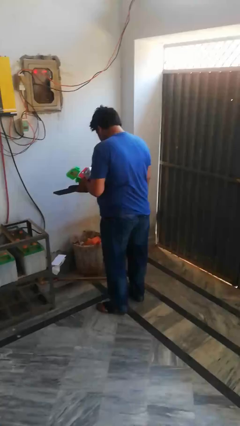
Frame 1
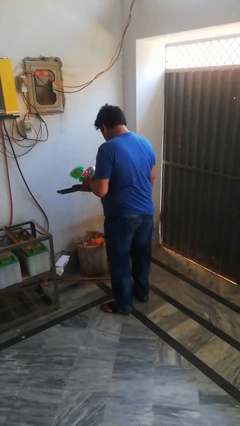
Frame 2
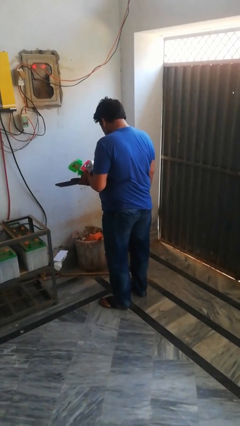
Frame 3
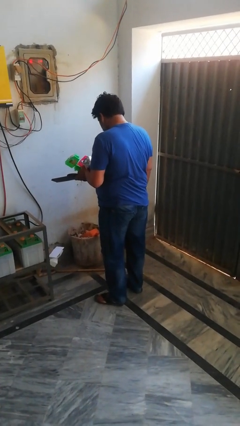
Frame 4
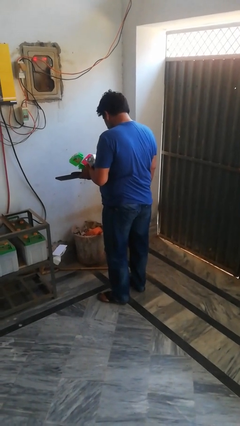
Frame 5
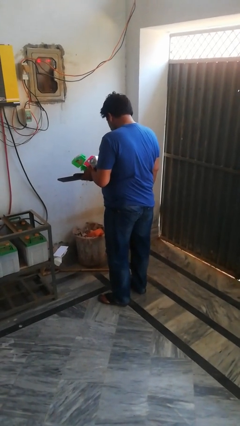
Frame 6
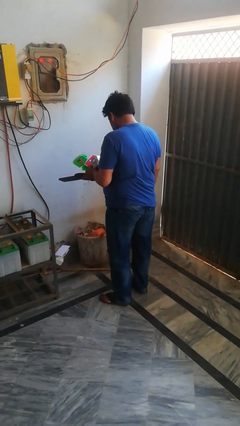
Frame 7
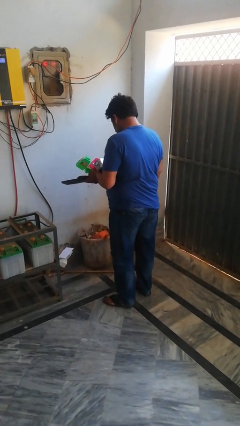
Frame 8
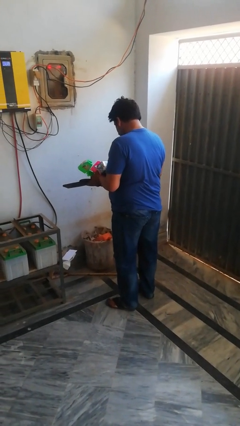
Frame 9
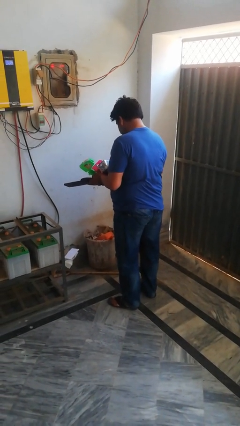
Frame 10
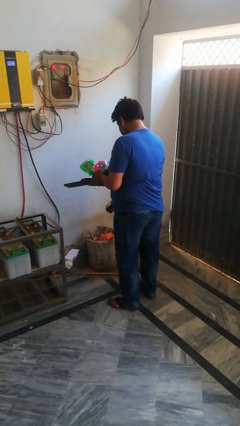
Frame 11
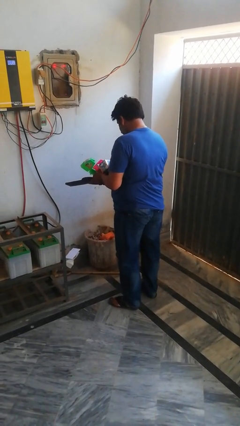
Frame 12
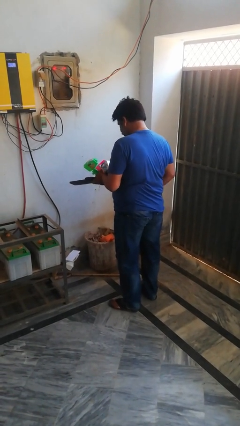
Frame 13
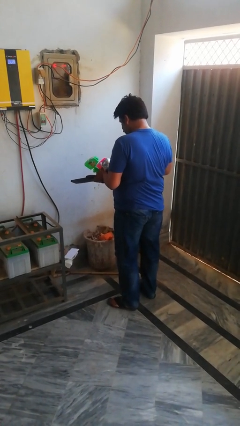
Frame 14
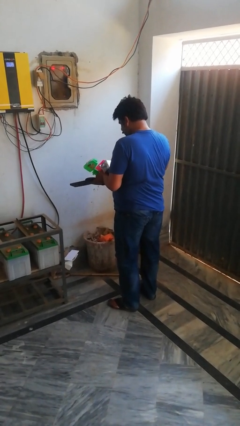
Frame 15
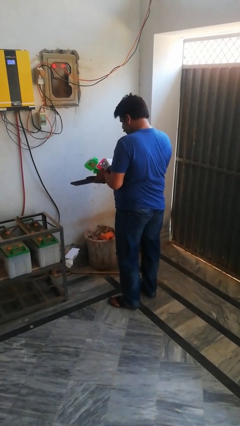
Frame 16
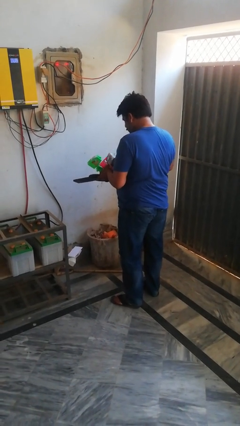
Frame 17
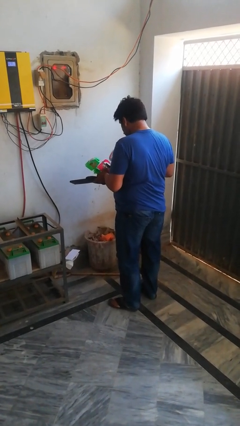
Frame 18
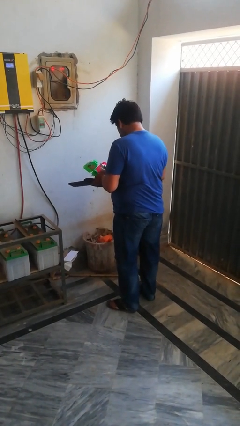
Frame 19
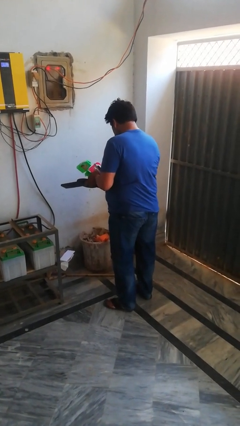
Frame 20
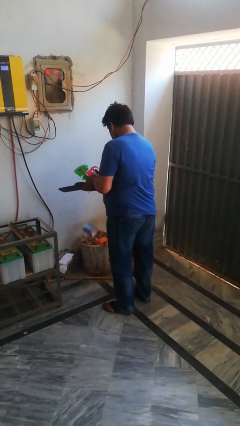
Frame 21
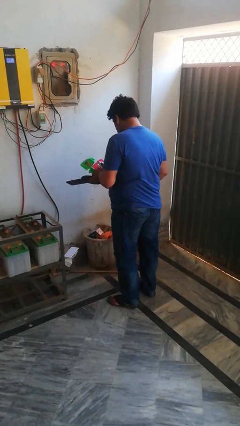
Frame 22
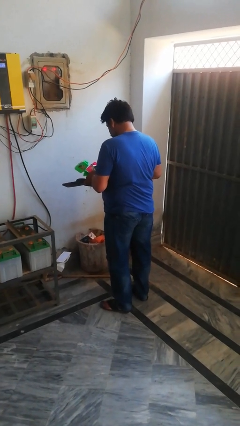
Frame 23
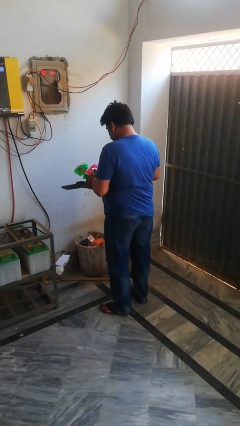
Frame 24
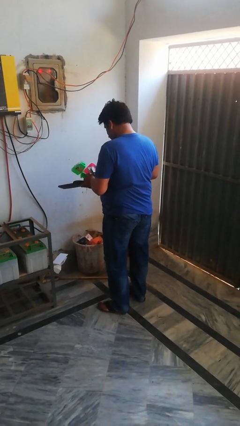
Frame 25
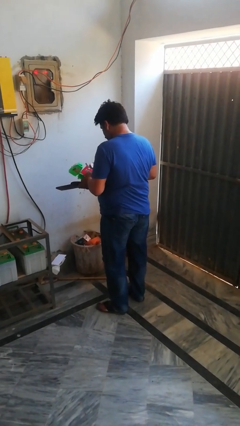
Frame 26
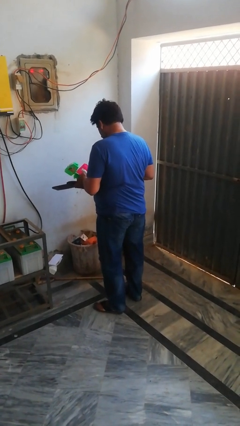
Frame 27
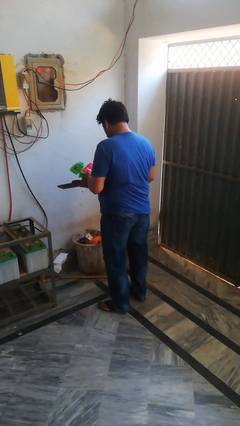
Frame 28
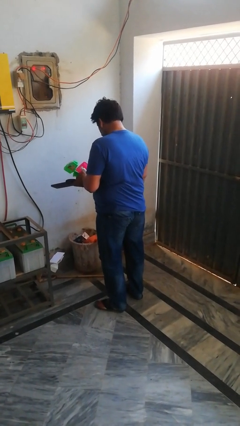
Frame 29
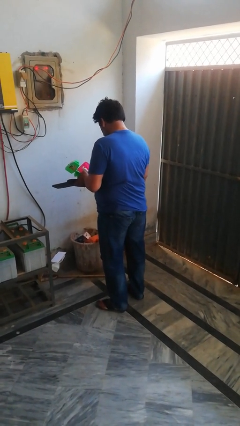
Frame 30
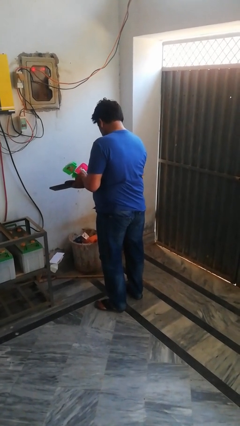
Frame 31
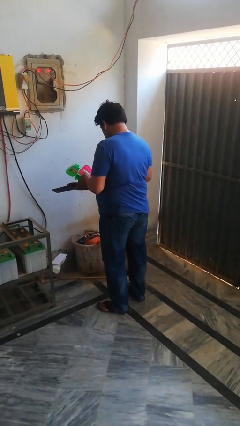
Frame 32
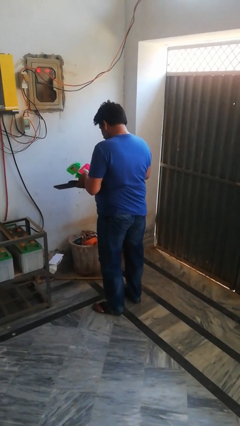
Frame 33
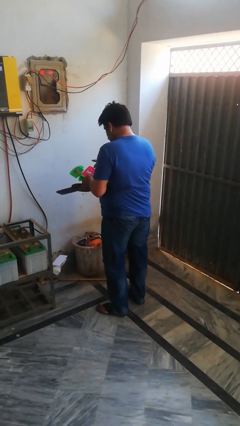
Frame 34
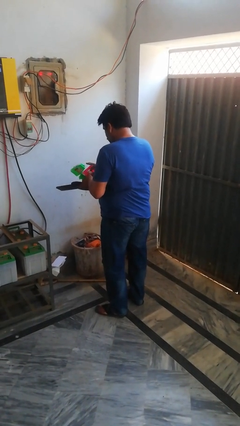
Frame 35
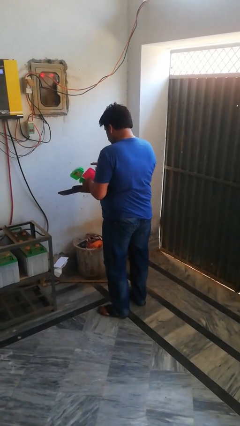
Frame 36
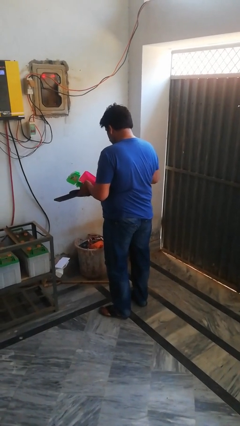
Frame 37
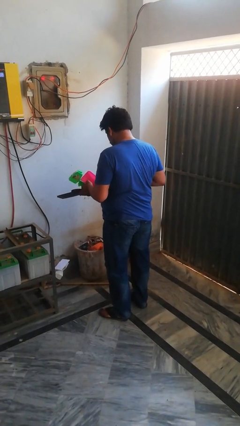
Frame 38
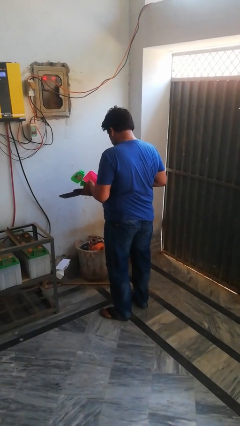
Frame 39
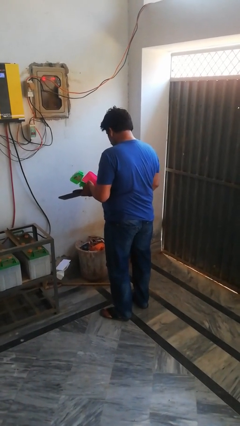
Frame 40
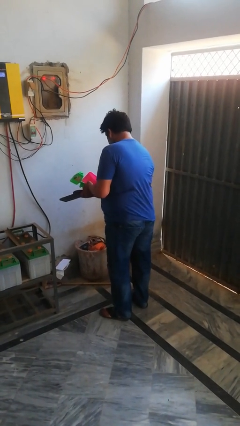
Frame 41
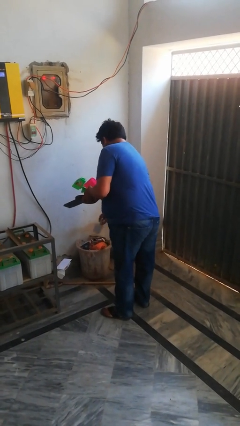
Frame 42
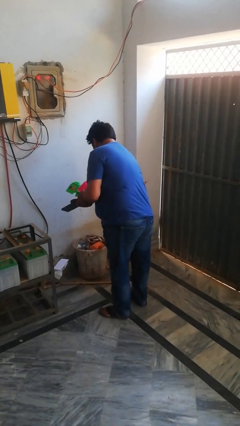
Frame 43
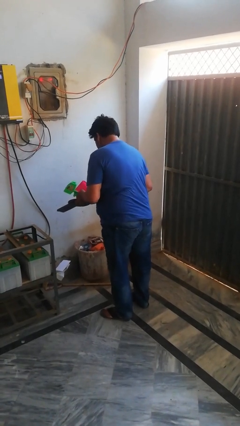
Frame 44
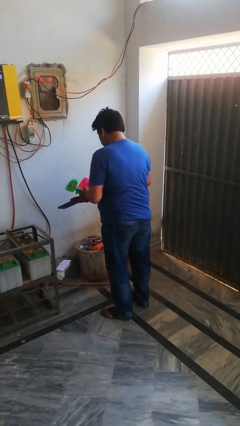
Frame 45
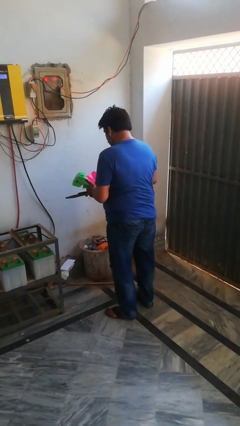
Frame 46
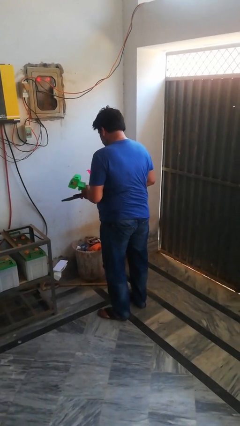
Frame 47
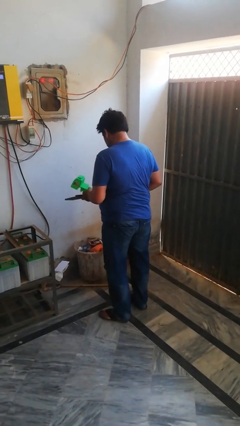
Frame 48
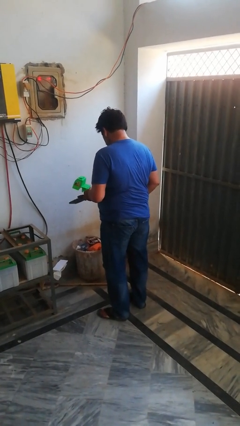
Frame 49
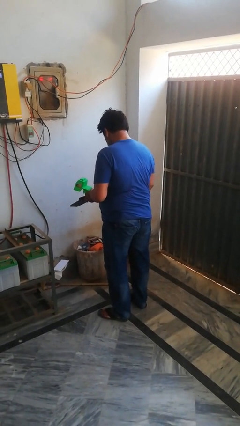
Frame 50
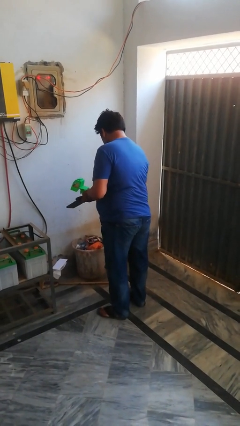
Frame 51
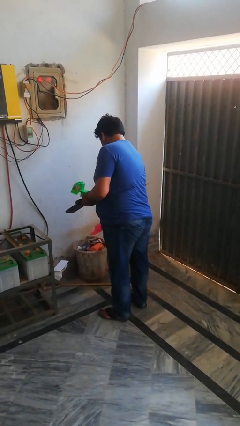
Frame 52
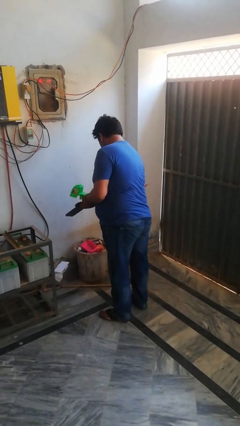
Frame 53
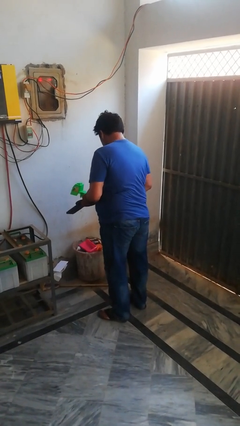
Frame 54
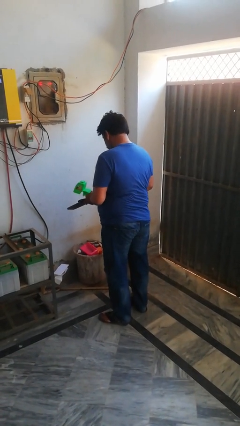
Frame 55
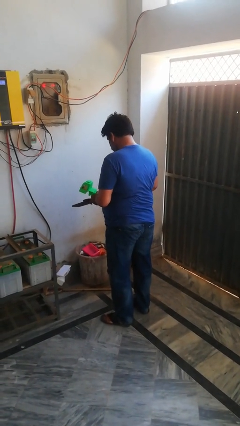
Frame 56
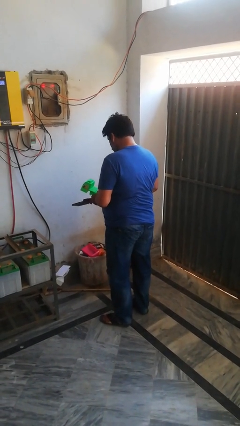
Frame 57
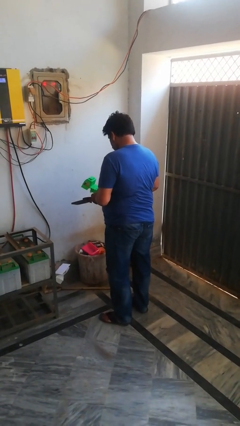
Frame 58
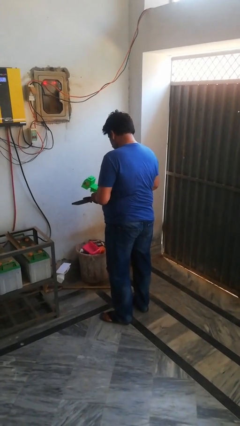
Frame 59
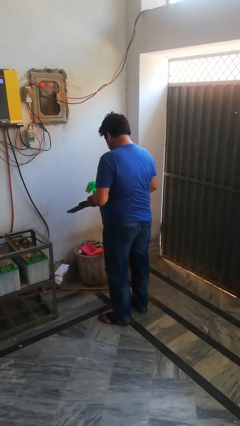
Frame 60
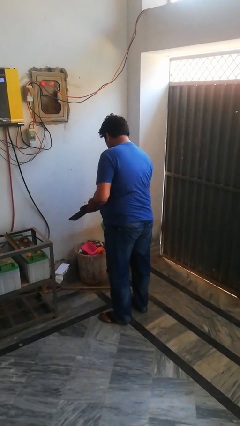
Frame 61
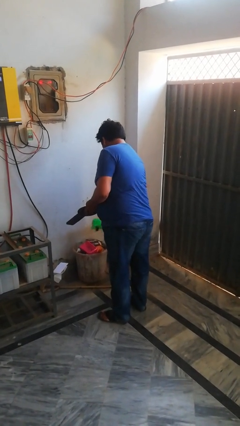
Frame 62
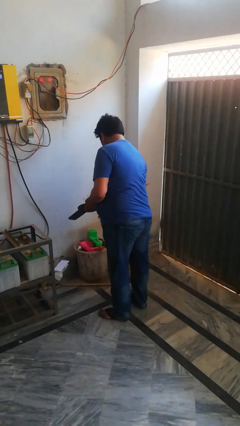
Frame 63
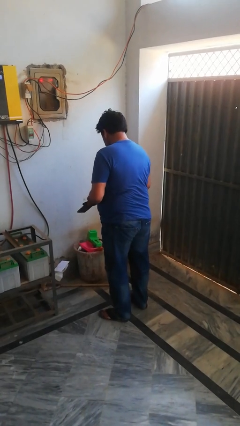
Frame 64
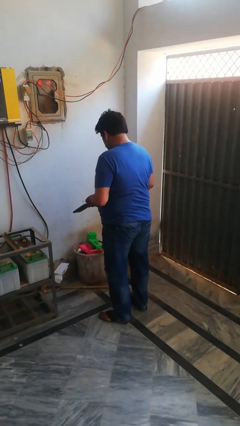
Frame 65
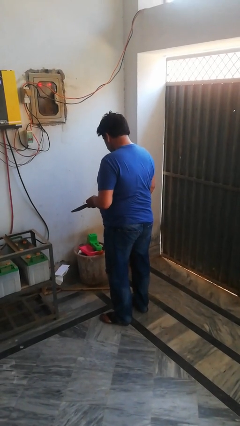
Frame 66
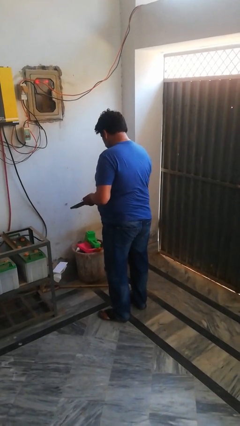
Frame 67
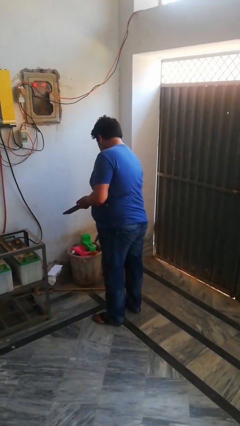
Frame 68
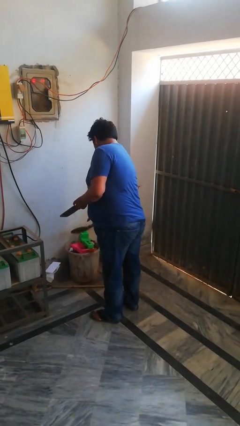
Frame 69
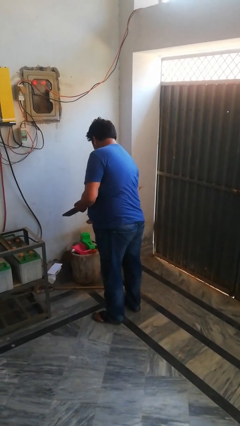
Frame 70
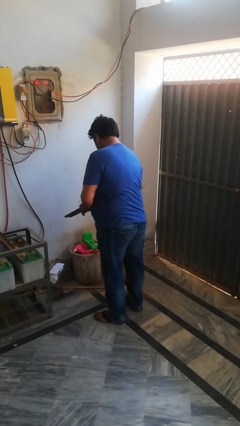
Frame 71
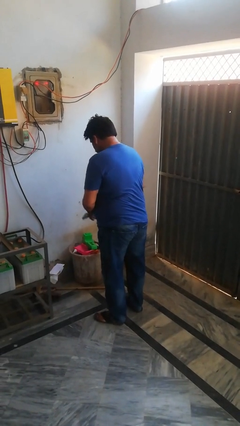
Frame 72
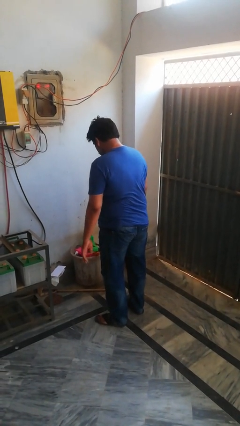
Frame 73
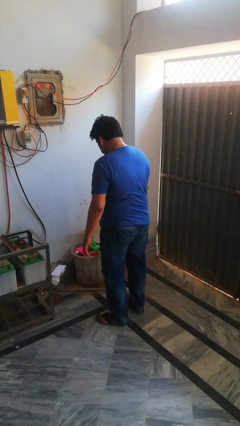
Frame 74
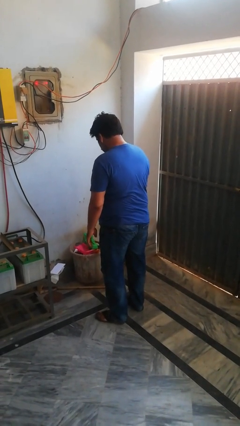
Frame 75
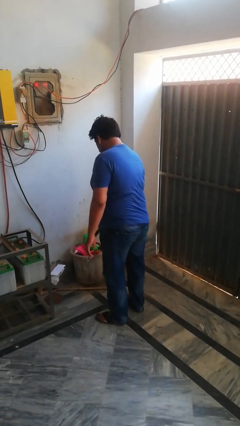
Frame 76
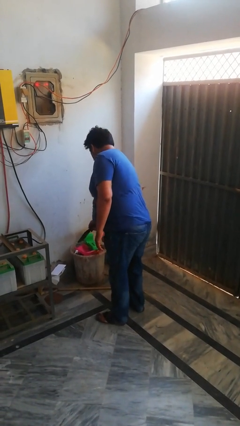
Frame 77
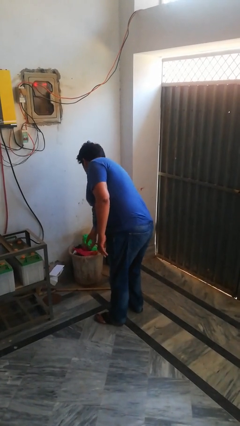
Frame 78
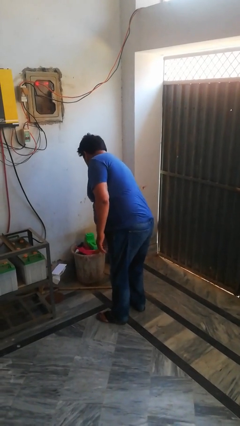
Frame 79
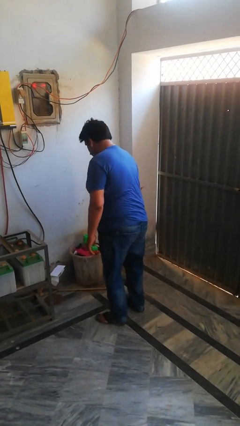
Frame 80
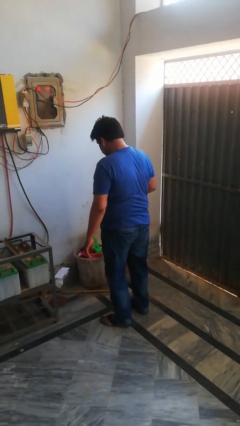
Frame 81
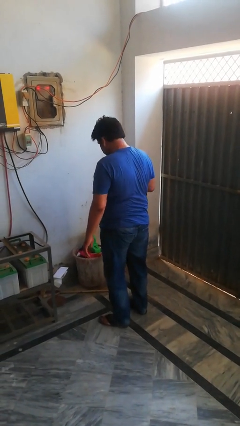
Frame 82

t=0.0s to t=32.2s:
person discards trash

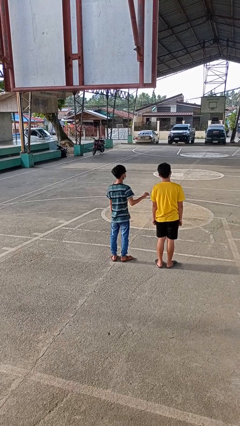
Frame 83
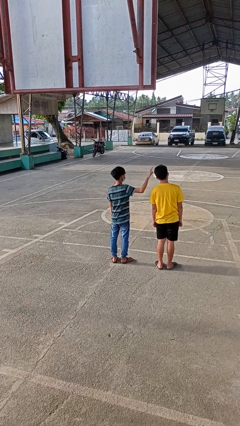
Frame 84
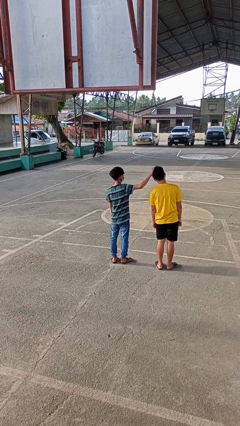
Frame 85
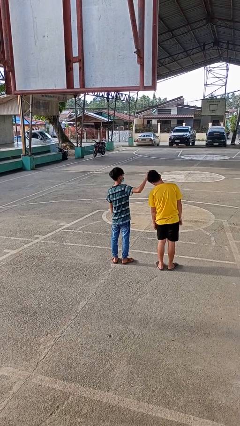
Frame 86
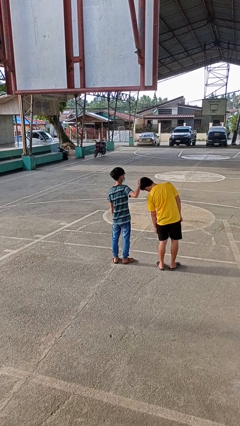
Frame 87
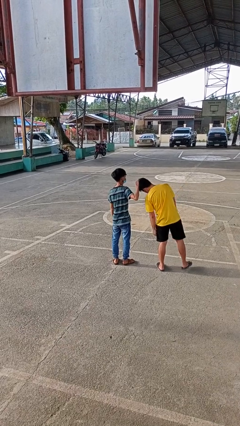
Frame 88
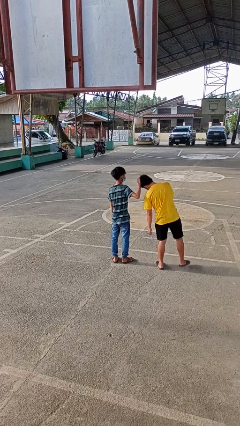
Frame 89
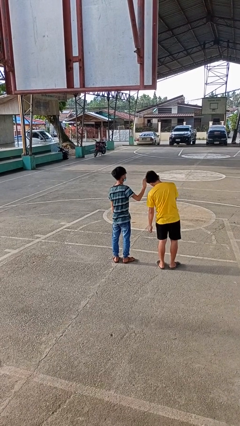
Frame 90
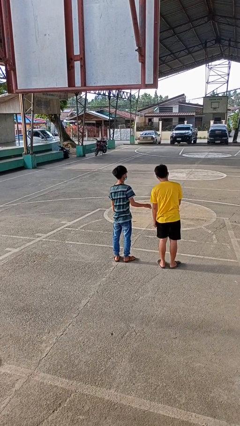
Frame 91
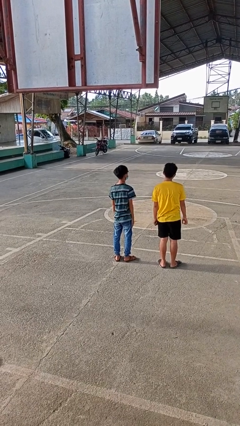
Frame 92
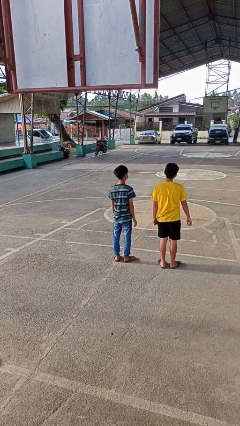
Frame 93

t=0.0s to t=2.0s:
person grabs person by hair
